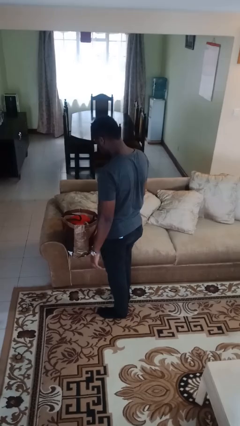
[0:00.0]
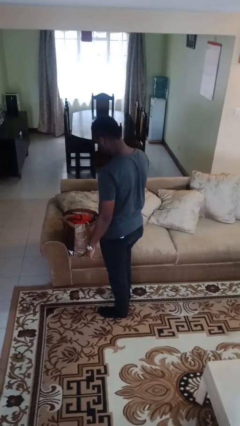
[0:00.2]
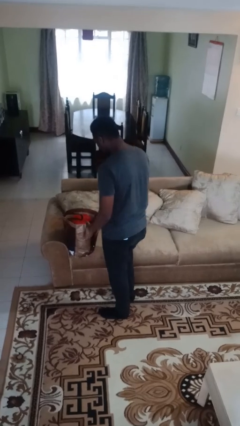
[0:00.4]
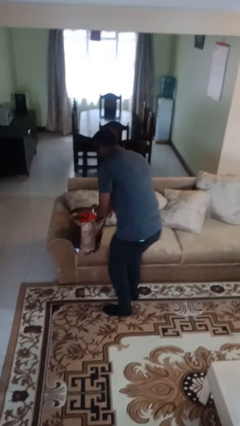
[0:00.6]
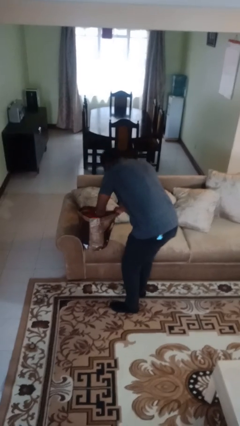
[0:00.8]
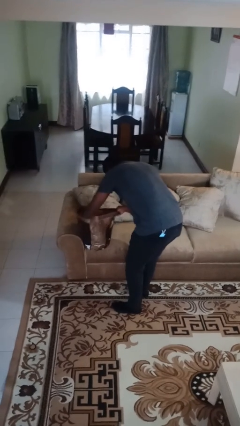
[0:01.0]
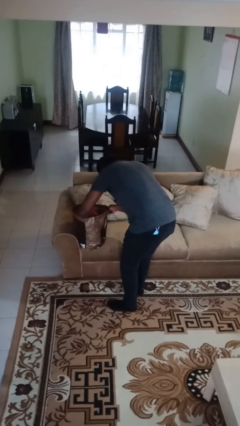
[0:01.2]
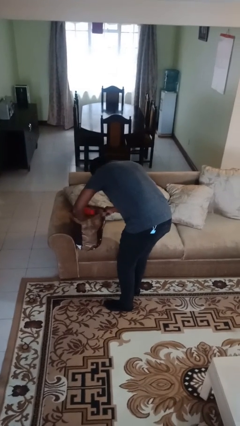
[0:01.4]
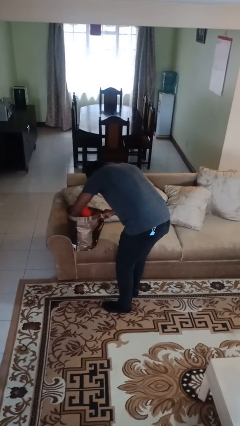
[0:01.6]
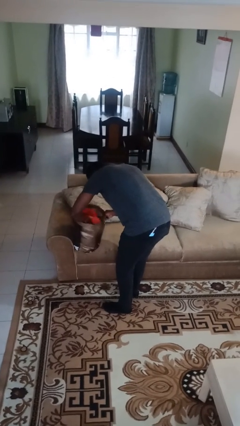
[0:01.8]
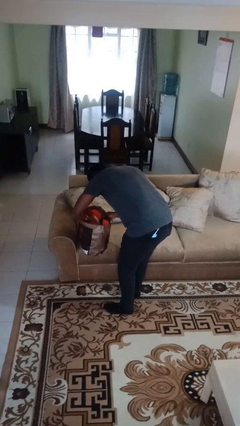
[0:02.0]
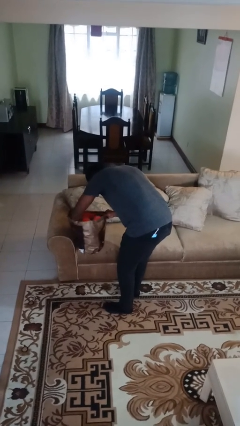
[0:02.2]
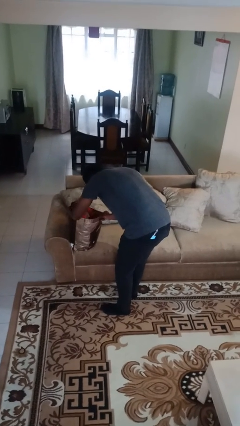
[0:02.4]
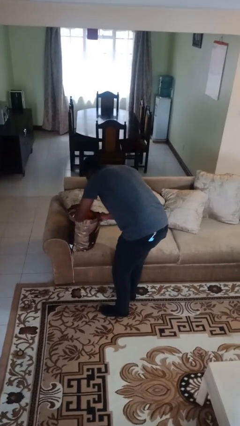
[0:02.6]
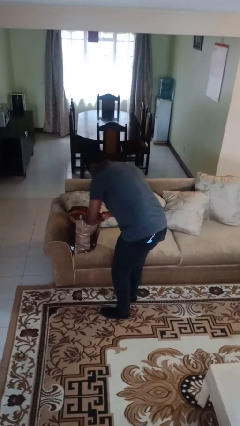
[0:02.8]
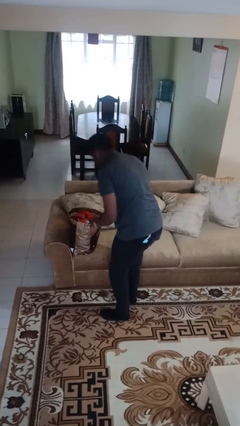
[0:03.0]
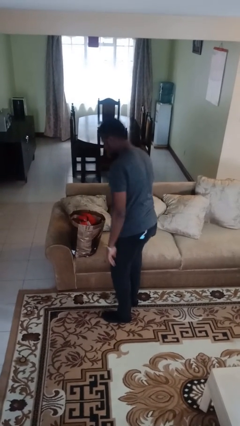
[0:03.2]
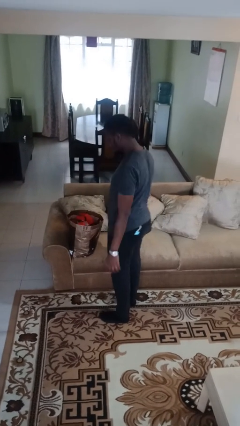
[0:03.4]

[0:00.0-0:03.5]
person searches in bag

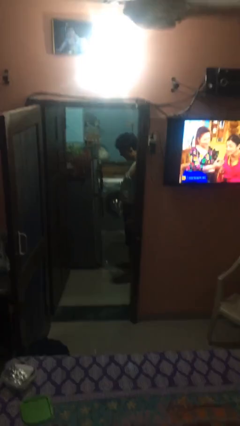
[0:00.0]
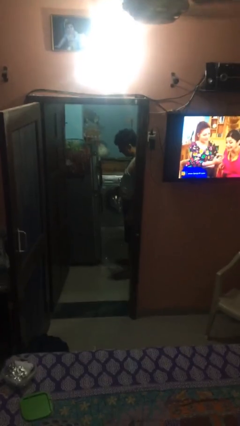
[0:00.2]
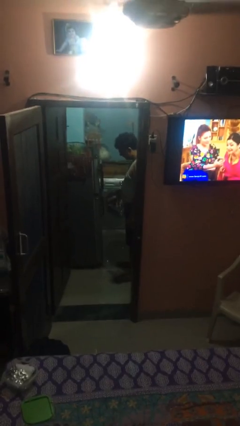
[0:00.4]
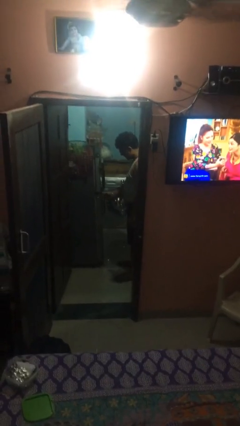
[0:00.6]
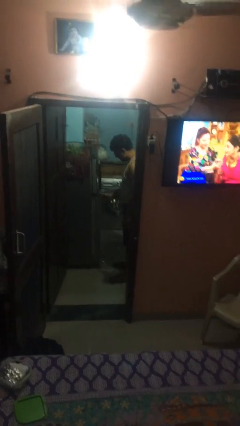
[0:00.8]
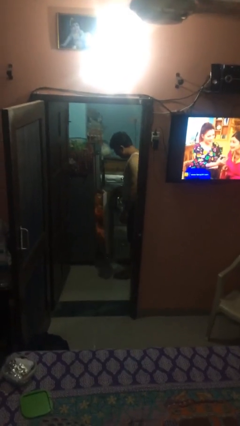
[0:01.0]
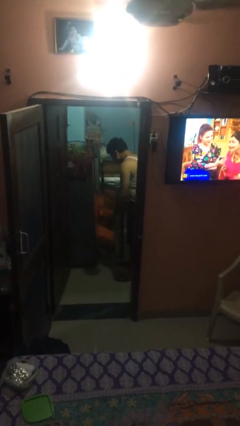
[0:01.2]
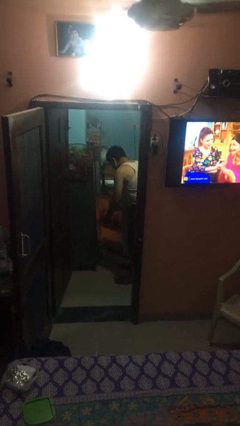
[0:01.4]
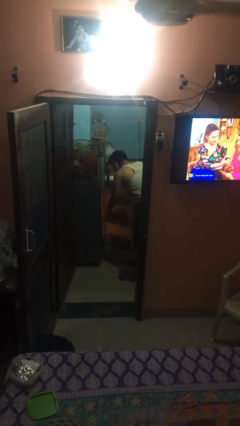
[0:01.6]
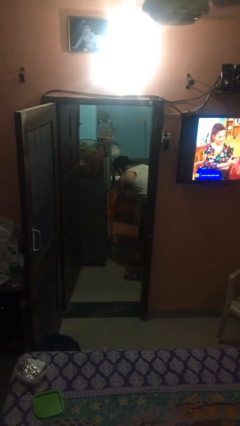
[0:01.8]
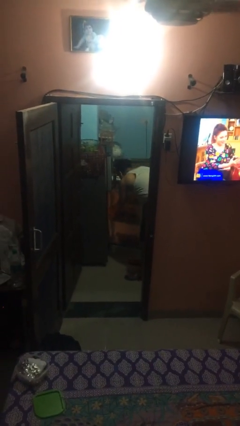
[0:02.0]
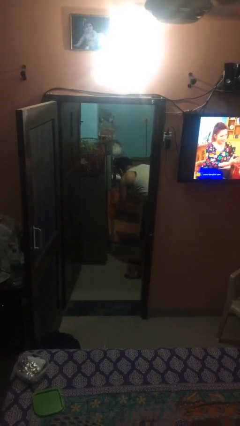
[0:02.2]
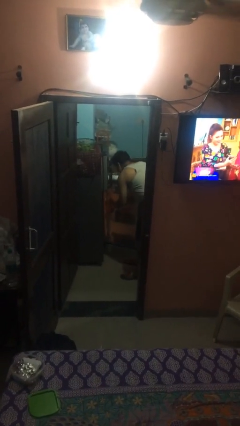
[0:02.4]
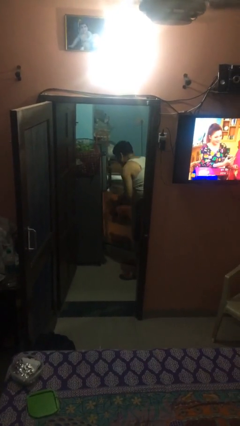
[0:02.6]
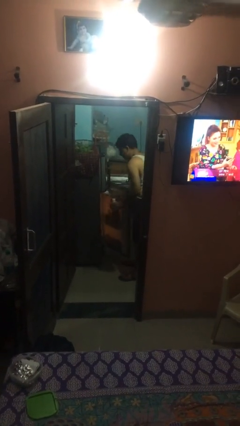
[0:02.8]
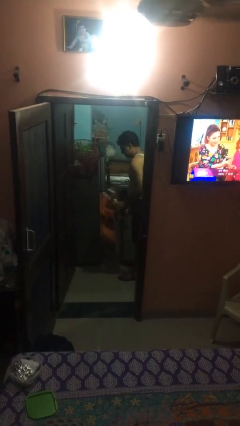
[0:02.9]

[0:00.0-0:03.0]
person takes object from refrigerator

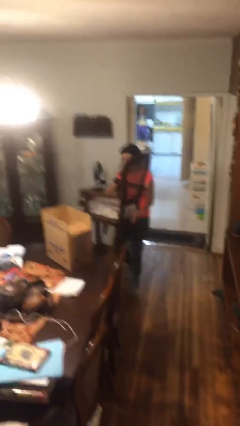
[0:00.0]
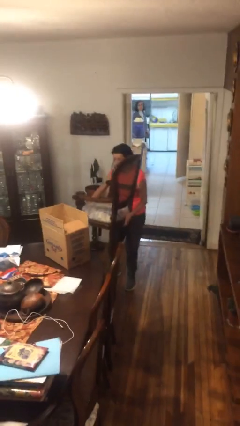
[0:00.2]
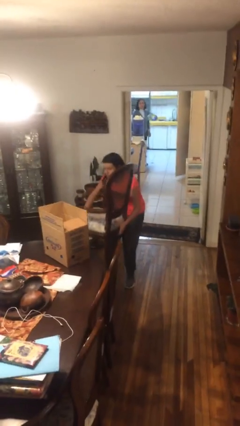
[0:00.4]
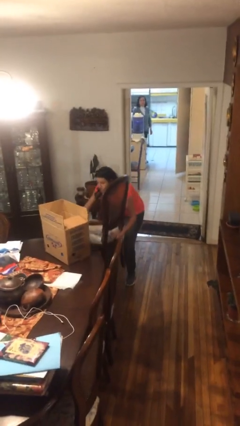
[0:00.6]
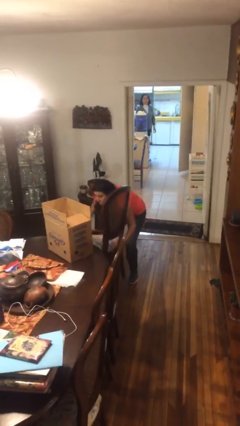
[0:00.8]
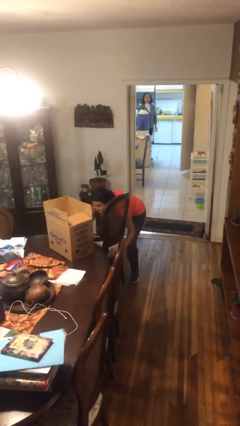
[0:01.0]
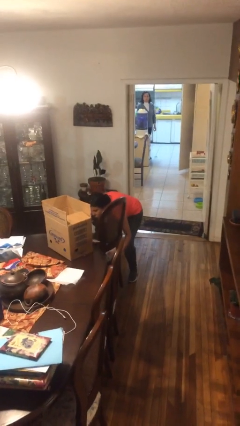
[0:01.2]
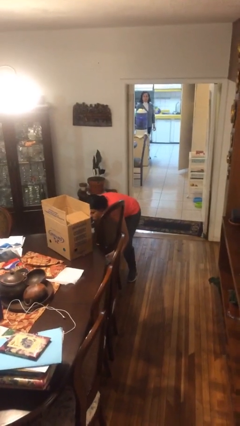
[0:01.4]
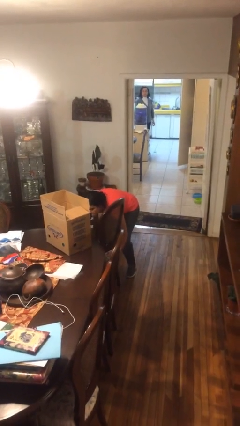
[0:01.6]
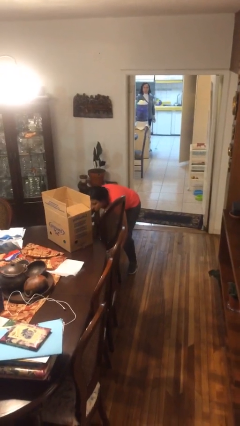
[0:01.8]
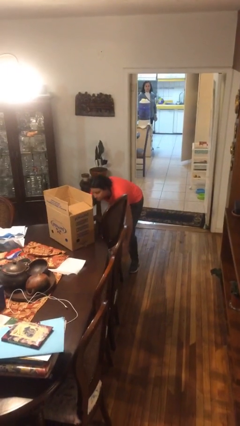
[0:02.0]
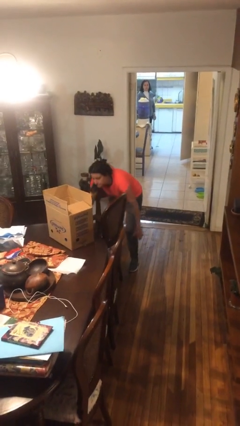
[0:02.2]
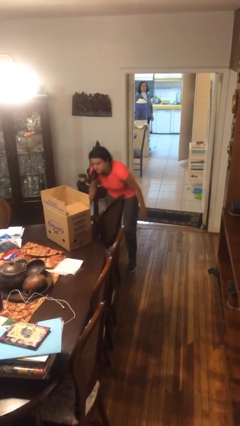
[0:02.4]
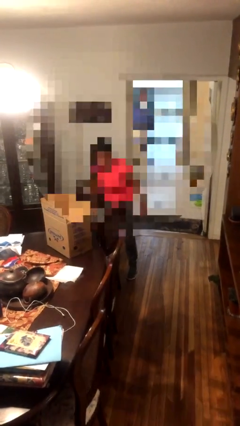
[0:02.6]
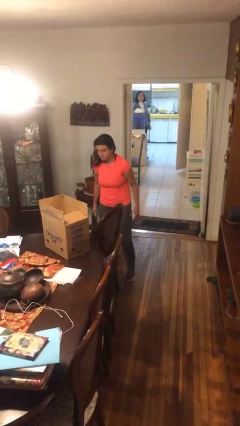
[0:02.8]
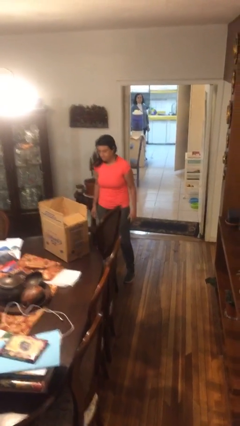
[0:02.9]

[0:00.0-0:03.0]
person puts down object on floor

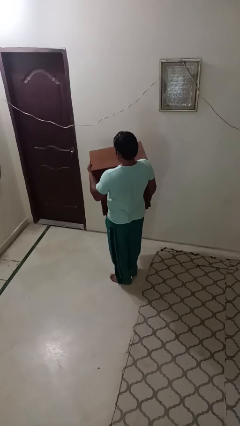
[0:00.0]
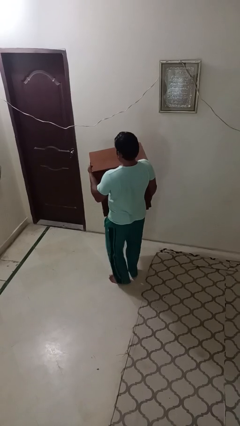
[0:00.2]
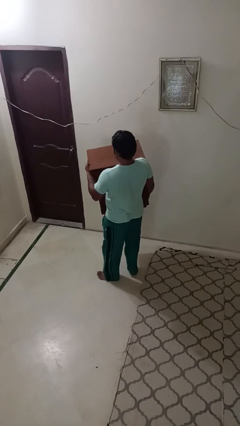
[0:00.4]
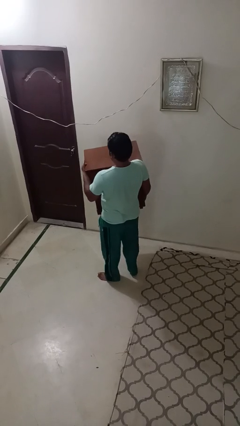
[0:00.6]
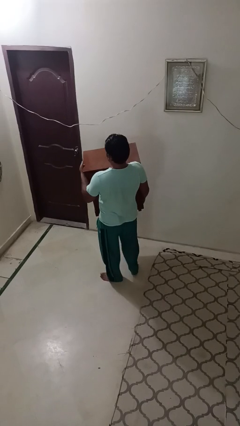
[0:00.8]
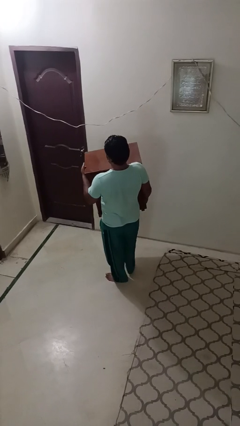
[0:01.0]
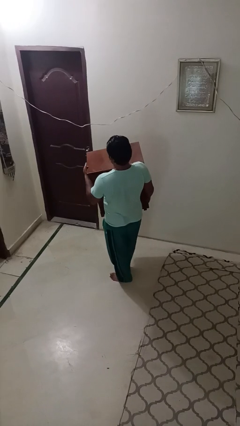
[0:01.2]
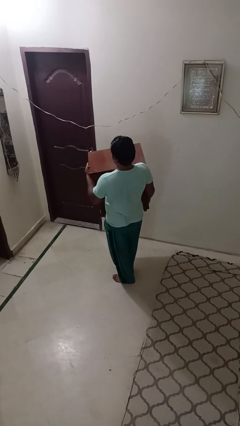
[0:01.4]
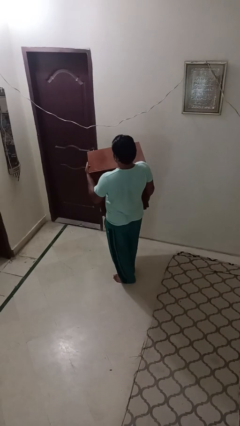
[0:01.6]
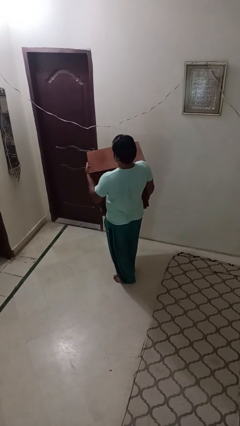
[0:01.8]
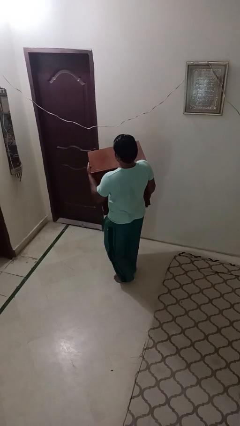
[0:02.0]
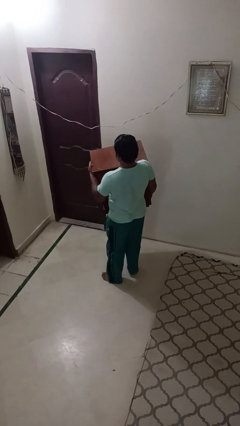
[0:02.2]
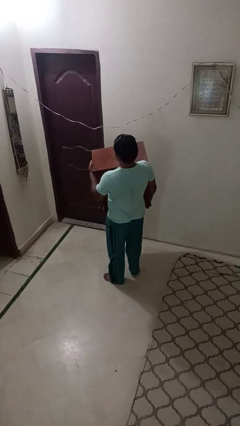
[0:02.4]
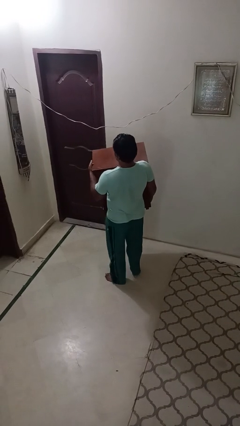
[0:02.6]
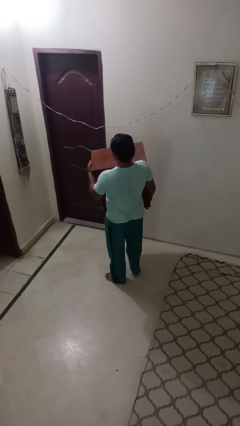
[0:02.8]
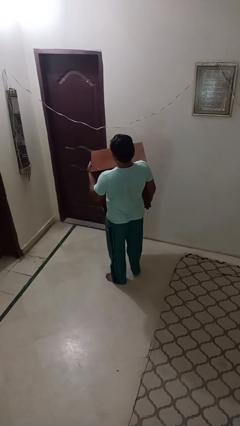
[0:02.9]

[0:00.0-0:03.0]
person carries furniture

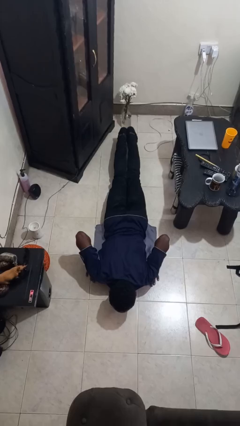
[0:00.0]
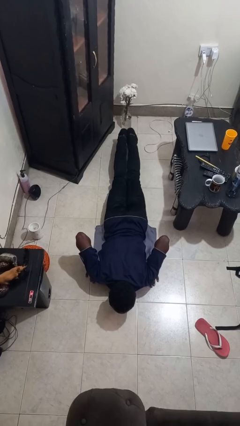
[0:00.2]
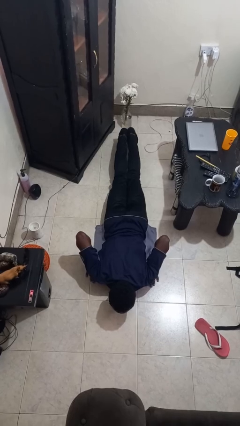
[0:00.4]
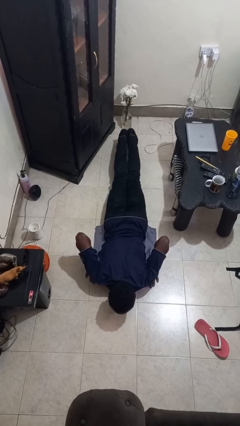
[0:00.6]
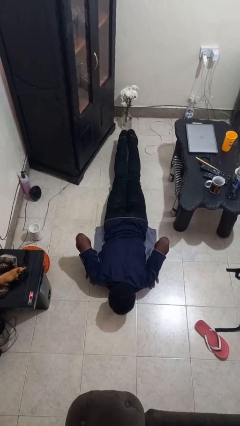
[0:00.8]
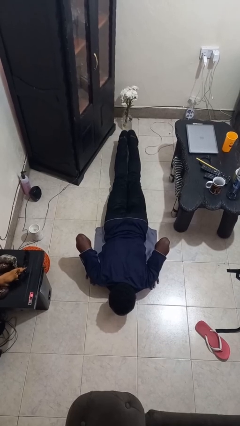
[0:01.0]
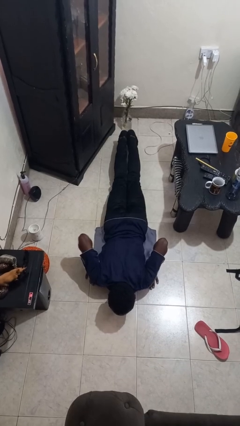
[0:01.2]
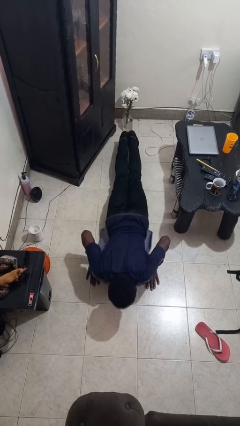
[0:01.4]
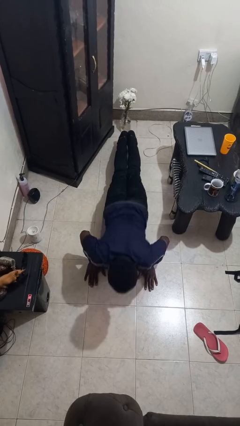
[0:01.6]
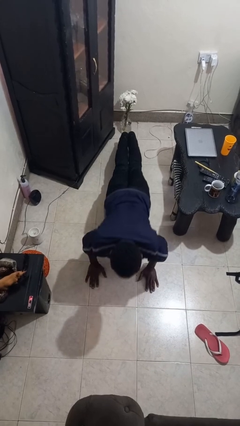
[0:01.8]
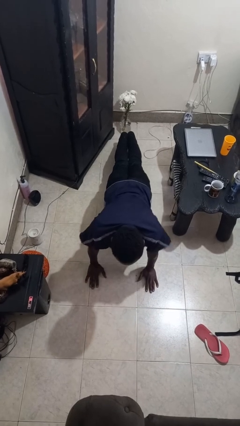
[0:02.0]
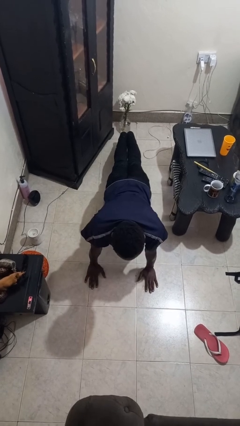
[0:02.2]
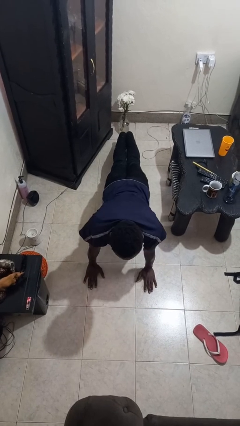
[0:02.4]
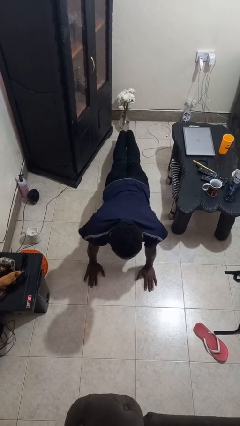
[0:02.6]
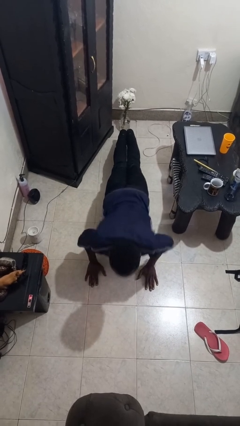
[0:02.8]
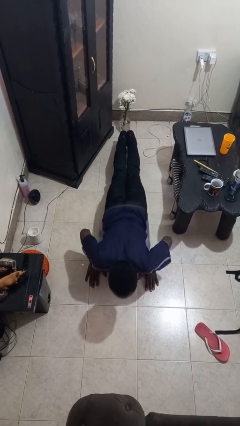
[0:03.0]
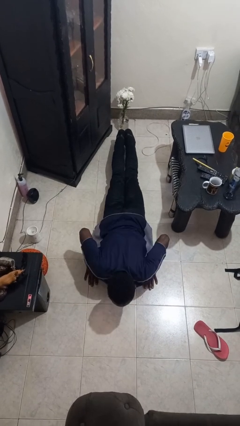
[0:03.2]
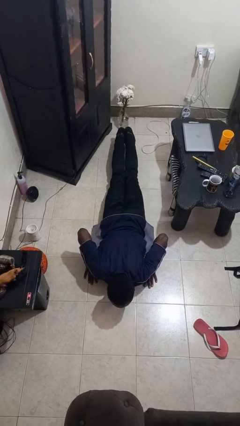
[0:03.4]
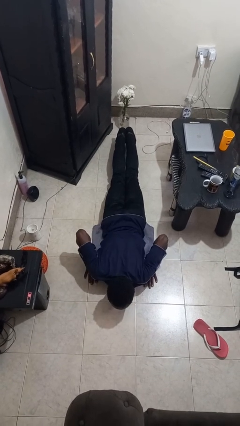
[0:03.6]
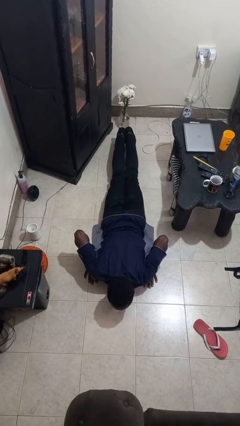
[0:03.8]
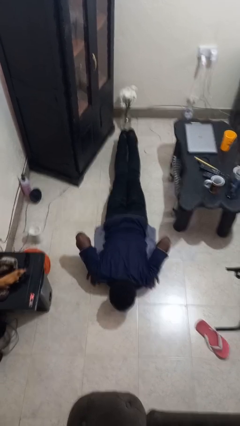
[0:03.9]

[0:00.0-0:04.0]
person exercises with pushup

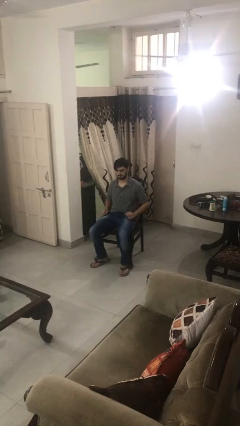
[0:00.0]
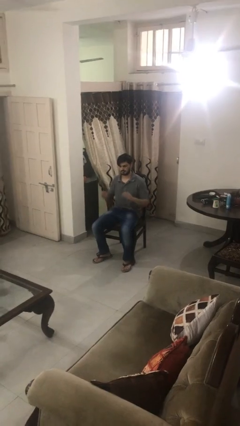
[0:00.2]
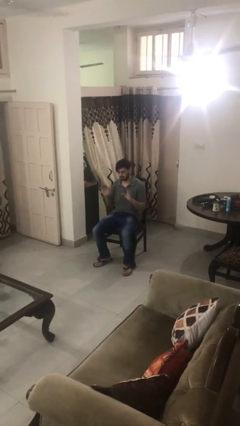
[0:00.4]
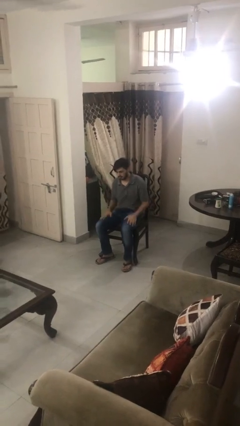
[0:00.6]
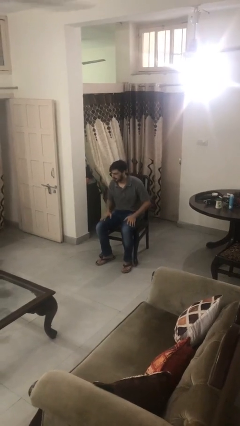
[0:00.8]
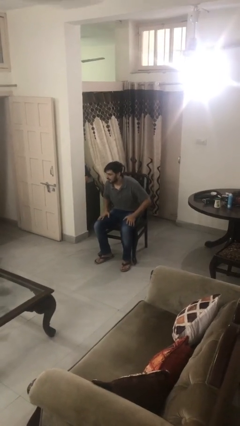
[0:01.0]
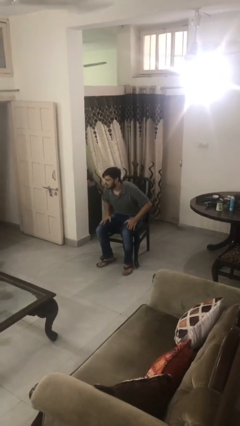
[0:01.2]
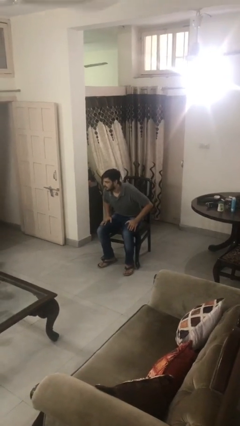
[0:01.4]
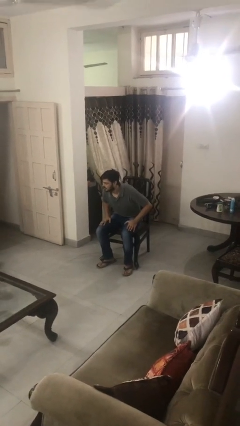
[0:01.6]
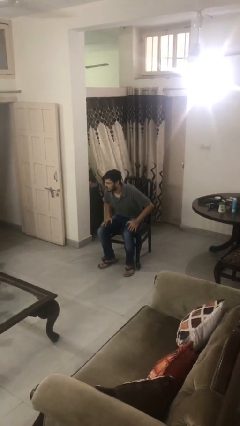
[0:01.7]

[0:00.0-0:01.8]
person slaps hands on thighs
